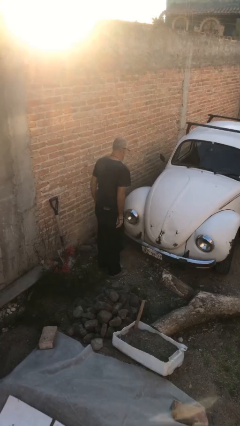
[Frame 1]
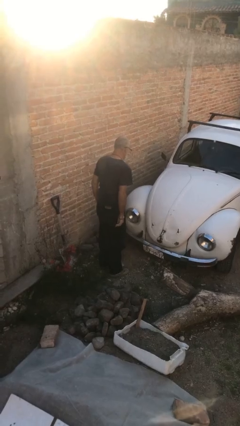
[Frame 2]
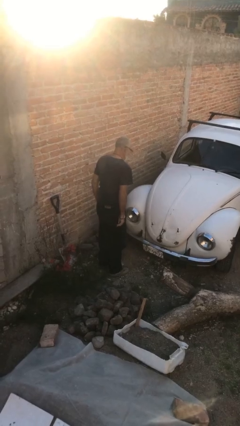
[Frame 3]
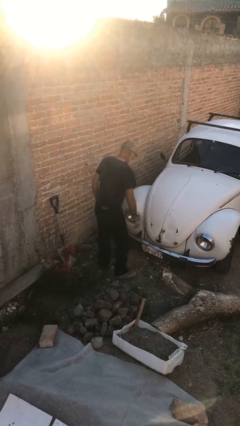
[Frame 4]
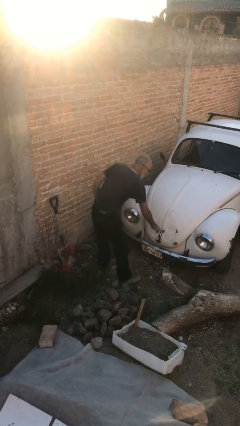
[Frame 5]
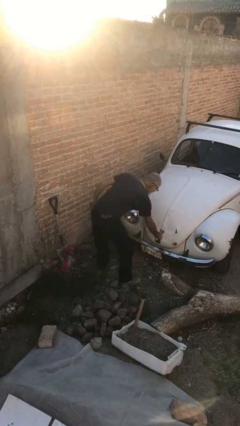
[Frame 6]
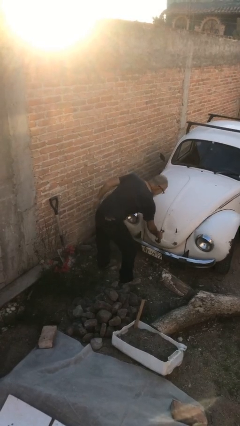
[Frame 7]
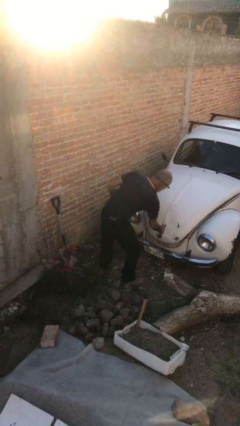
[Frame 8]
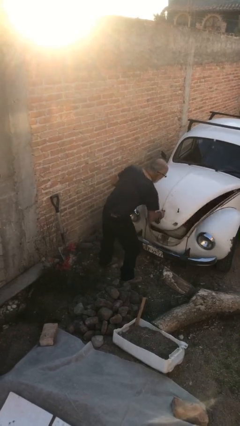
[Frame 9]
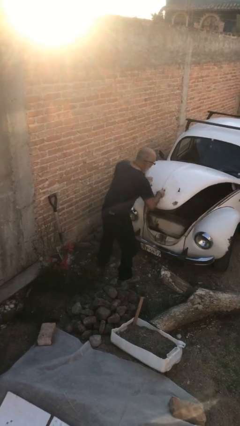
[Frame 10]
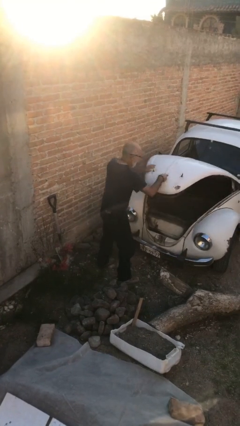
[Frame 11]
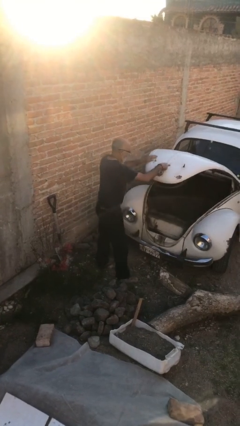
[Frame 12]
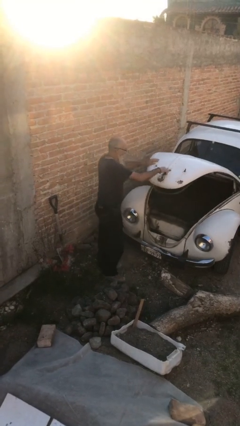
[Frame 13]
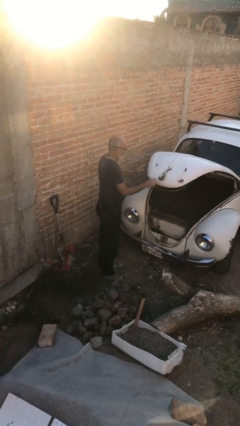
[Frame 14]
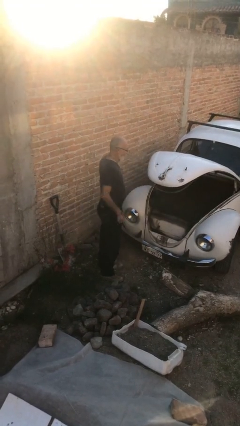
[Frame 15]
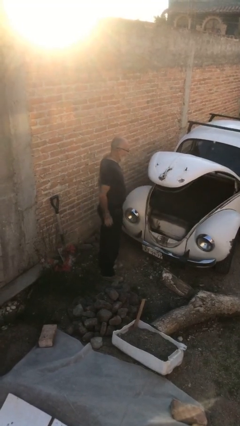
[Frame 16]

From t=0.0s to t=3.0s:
person opens car trunk

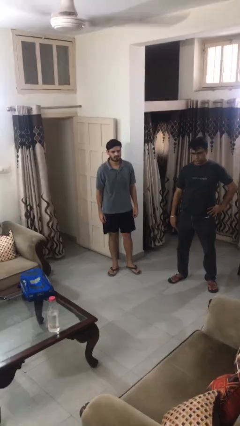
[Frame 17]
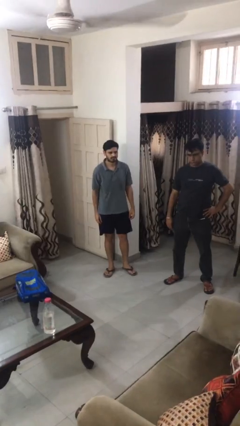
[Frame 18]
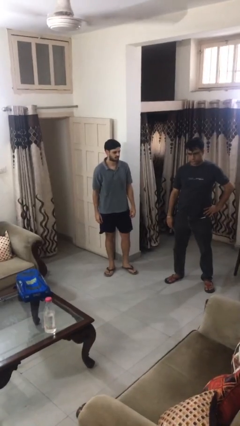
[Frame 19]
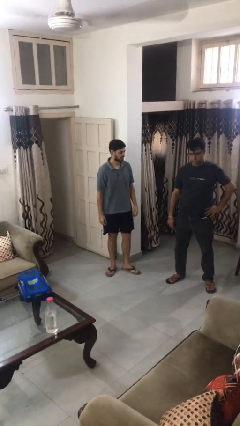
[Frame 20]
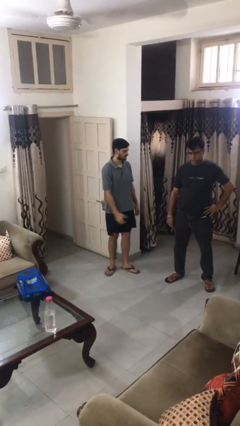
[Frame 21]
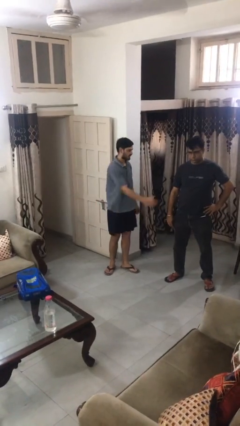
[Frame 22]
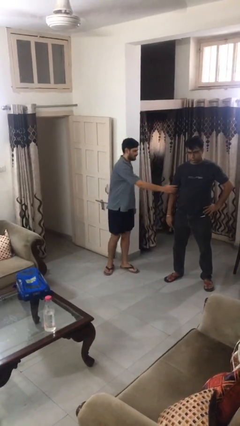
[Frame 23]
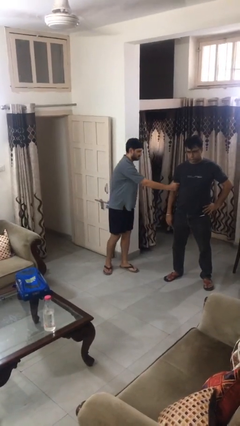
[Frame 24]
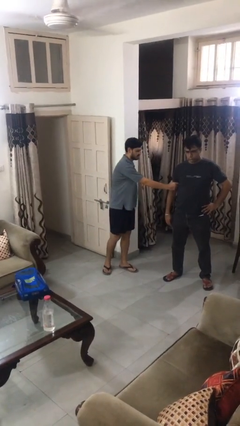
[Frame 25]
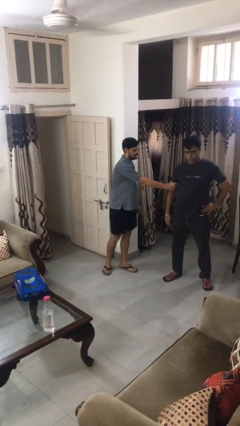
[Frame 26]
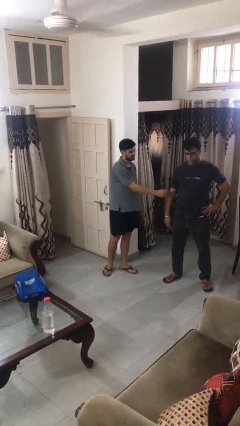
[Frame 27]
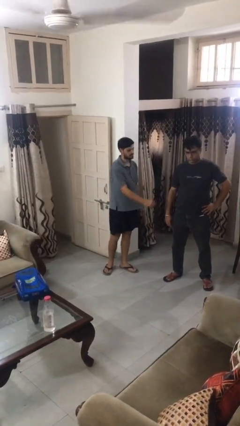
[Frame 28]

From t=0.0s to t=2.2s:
person grabs person by bicep

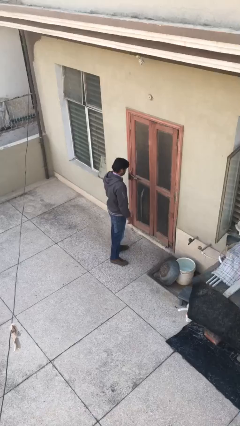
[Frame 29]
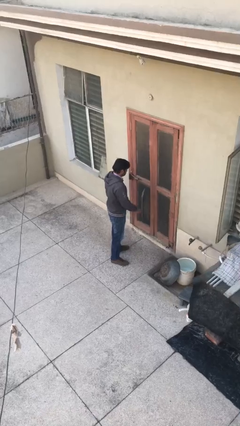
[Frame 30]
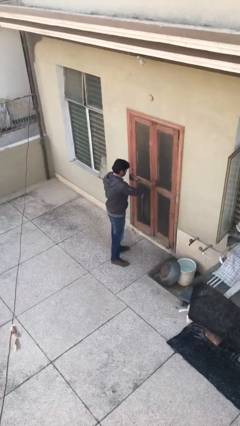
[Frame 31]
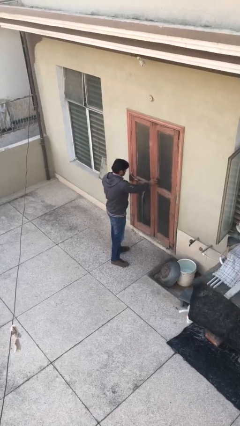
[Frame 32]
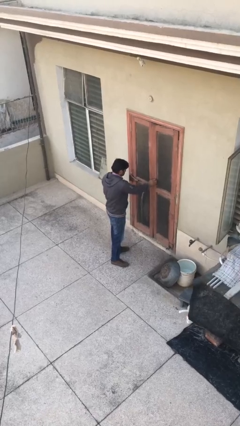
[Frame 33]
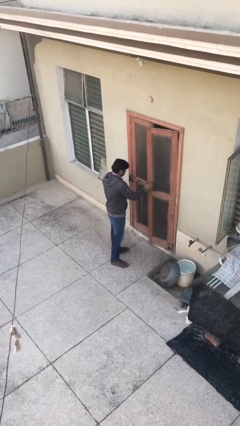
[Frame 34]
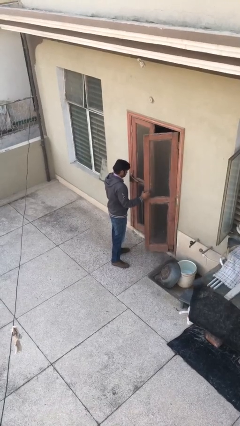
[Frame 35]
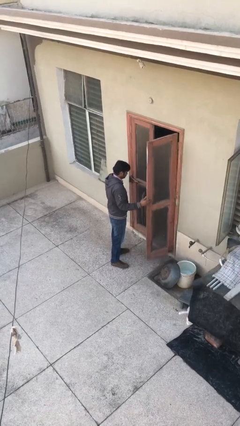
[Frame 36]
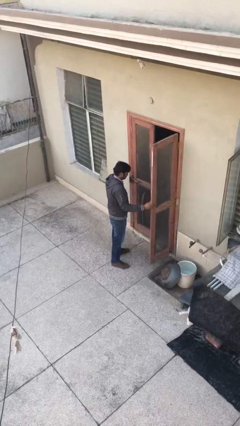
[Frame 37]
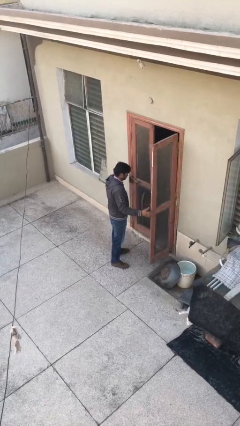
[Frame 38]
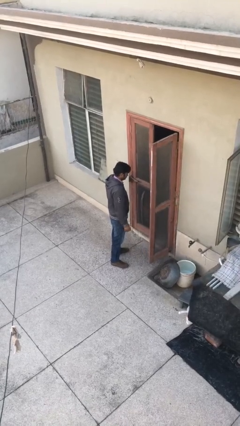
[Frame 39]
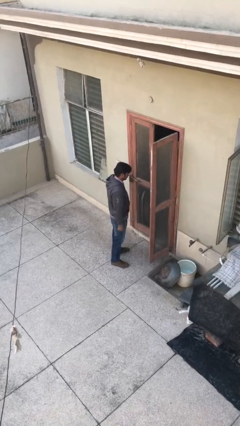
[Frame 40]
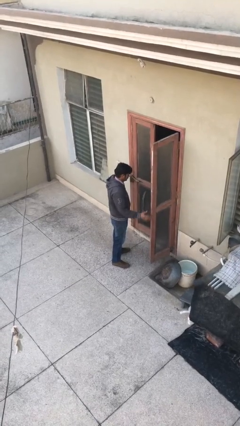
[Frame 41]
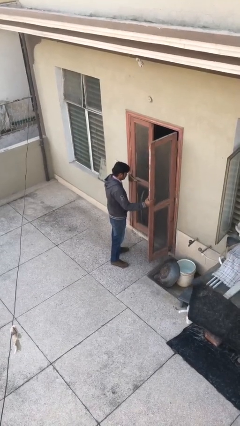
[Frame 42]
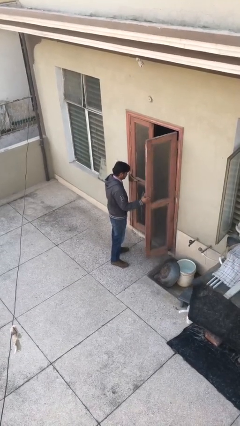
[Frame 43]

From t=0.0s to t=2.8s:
person opens facility door

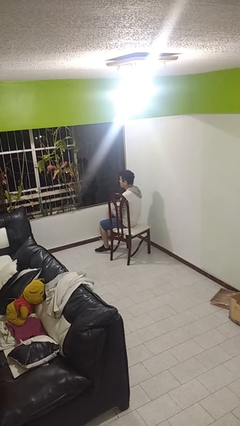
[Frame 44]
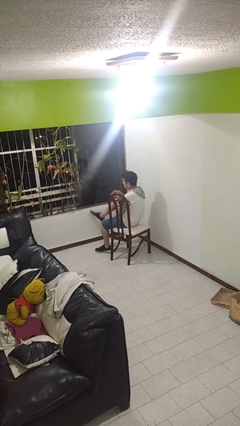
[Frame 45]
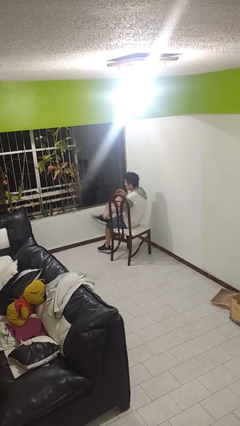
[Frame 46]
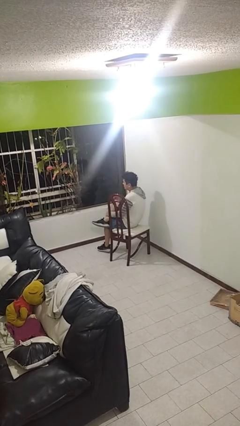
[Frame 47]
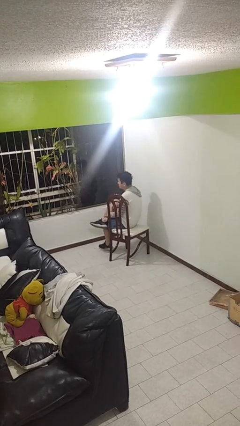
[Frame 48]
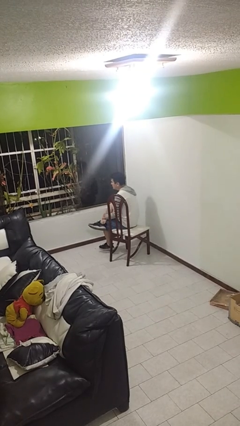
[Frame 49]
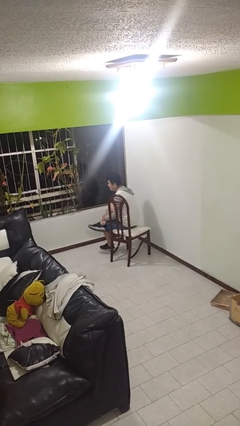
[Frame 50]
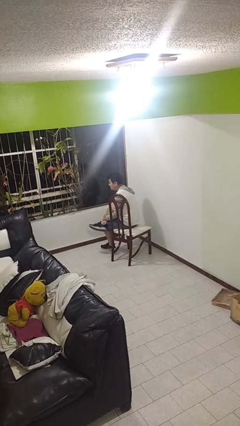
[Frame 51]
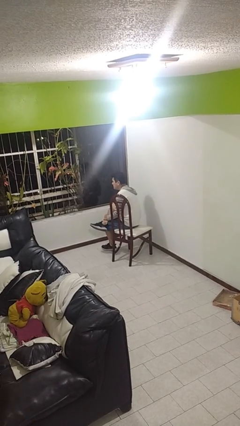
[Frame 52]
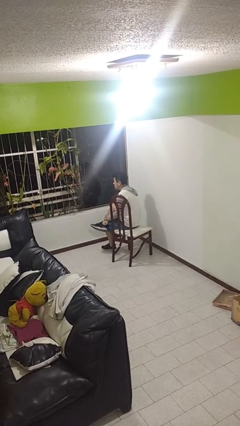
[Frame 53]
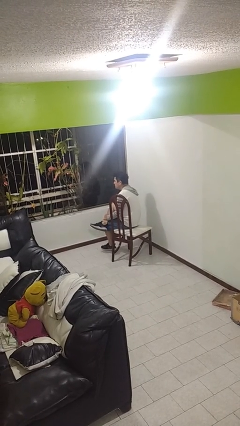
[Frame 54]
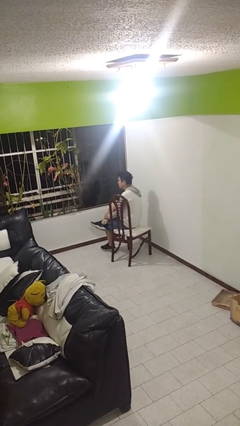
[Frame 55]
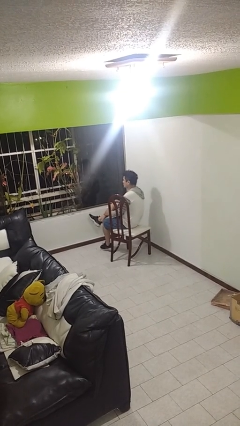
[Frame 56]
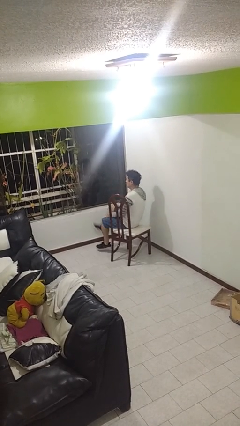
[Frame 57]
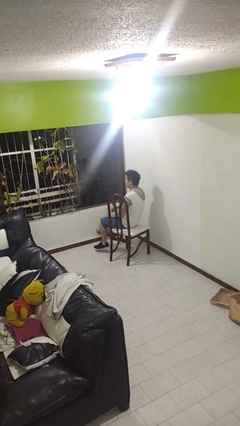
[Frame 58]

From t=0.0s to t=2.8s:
person crosses legs

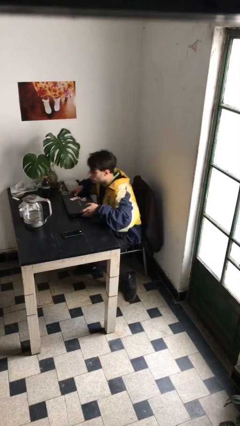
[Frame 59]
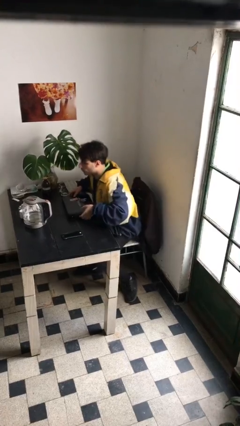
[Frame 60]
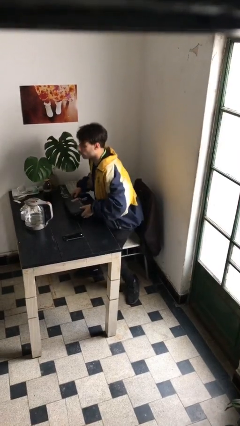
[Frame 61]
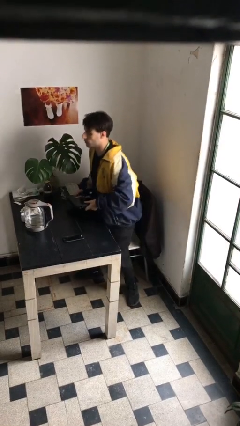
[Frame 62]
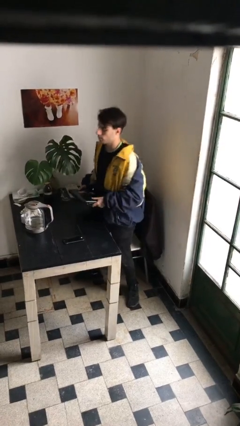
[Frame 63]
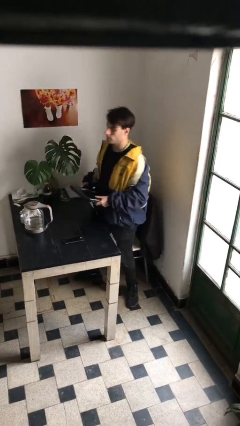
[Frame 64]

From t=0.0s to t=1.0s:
person stands up

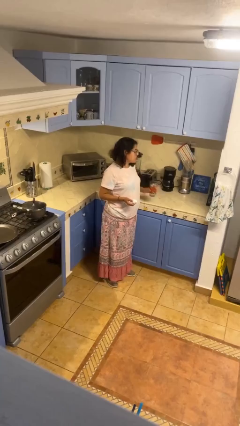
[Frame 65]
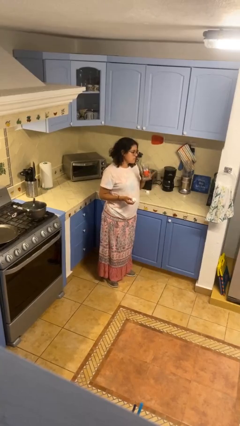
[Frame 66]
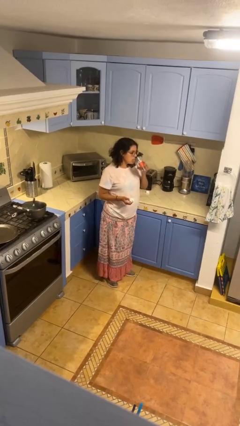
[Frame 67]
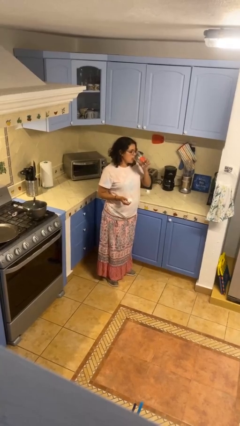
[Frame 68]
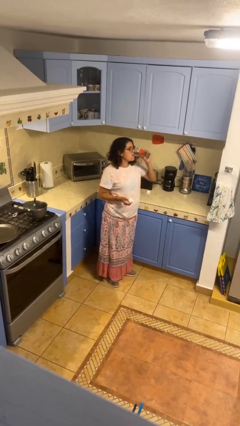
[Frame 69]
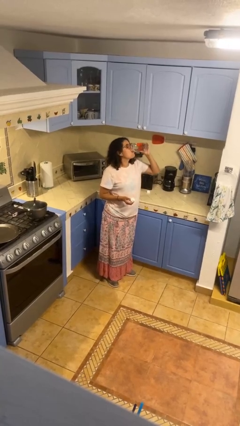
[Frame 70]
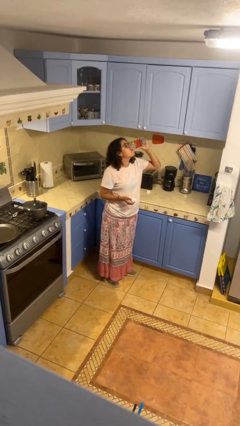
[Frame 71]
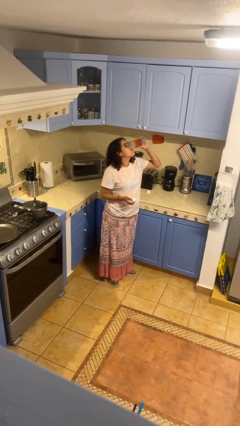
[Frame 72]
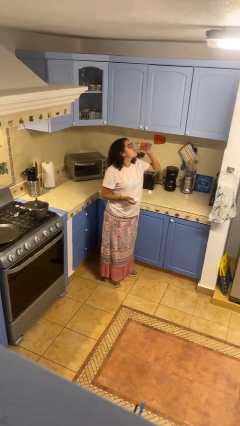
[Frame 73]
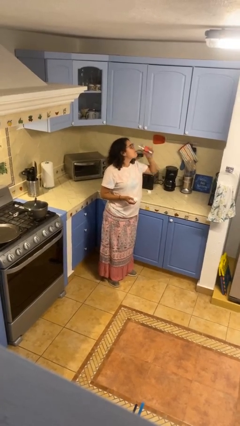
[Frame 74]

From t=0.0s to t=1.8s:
person drinks from cup

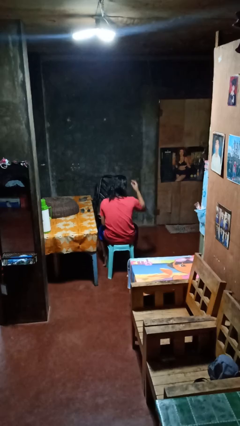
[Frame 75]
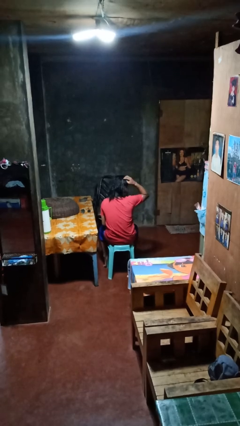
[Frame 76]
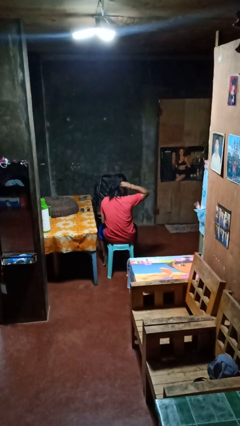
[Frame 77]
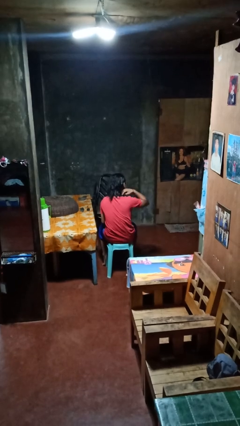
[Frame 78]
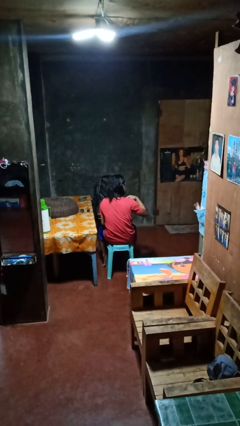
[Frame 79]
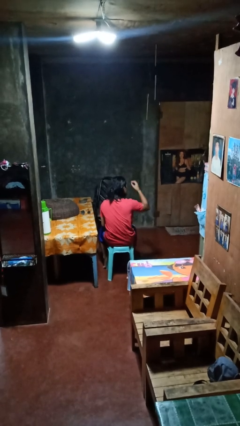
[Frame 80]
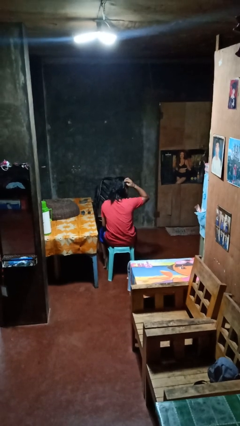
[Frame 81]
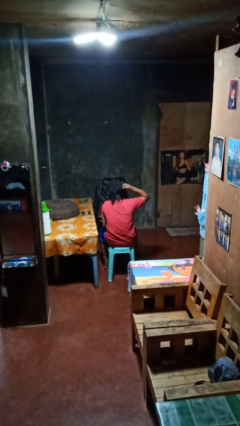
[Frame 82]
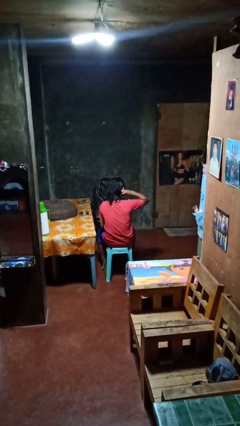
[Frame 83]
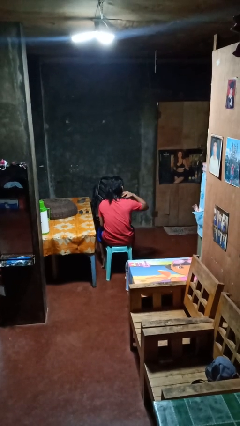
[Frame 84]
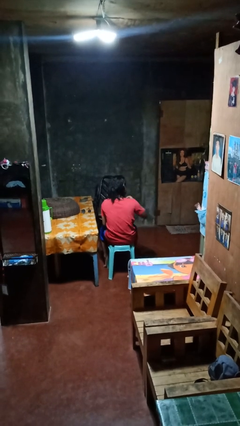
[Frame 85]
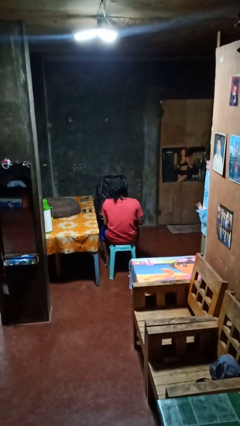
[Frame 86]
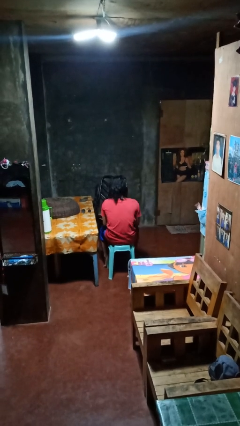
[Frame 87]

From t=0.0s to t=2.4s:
person strokes hair

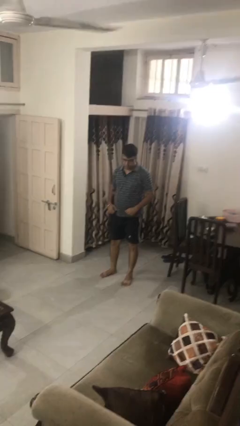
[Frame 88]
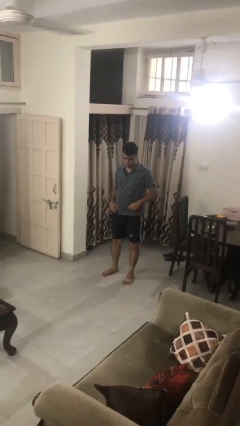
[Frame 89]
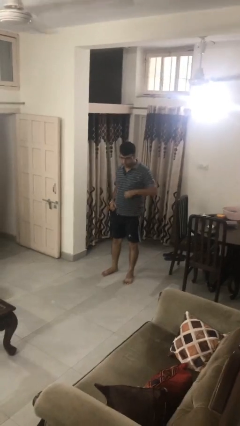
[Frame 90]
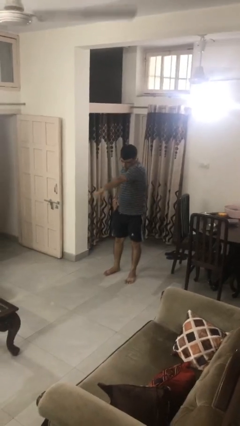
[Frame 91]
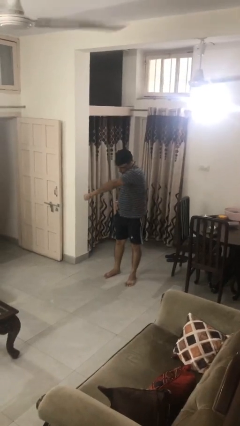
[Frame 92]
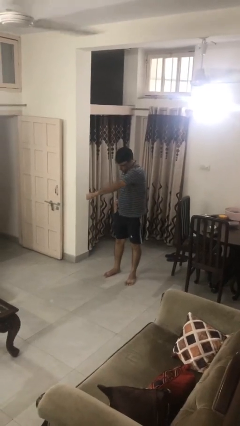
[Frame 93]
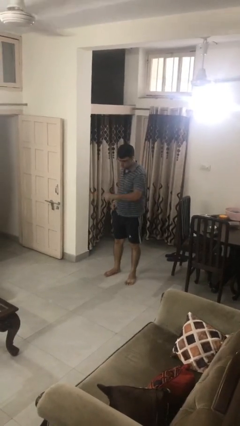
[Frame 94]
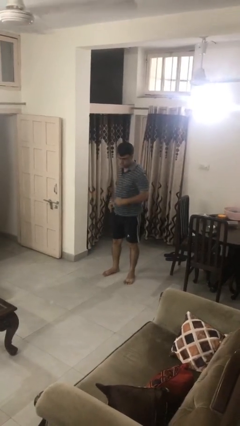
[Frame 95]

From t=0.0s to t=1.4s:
person karate chop
